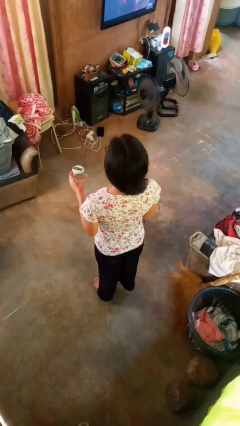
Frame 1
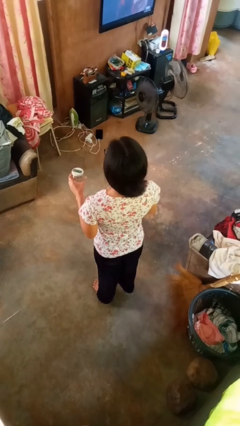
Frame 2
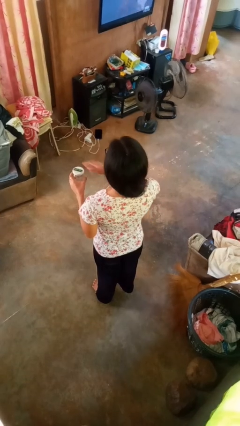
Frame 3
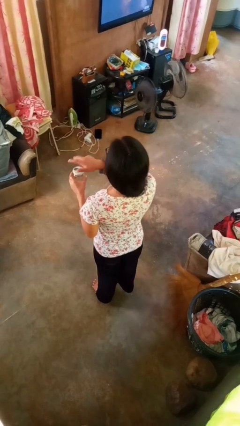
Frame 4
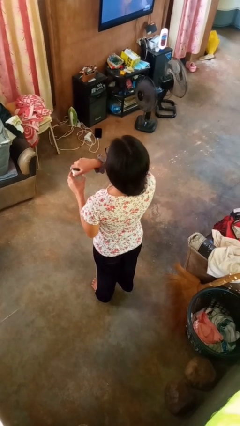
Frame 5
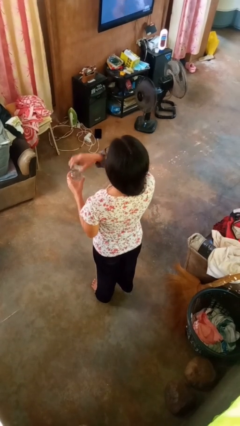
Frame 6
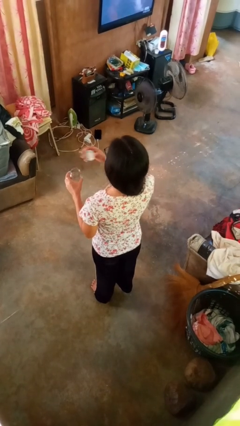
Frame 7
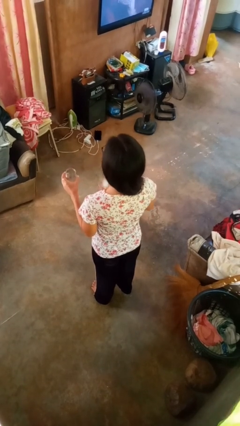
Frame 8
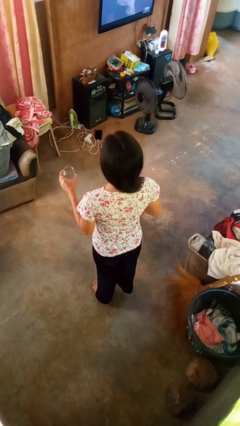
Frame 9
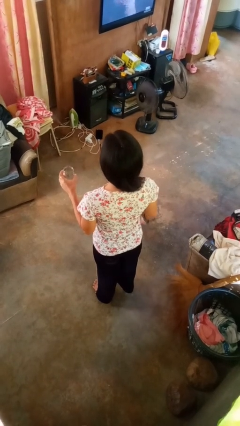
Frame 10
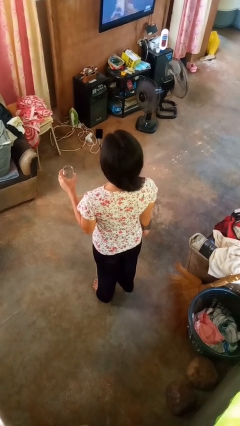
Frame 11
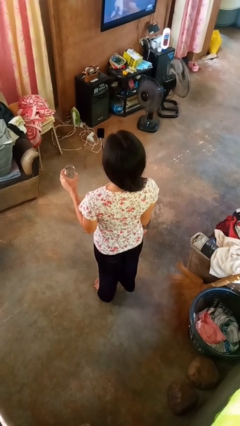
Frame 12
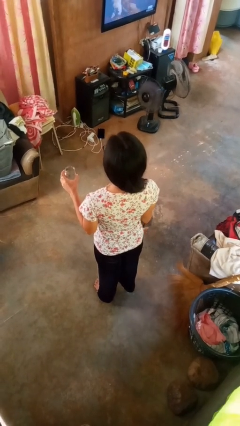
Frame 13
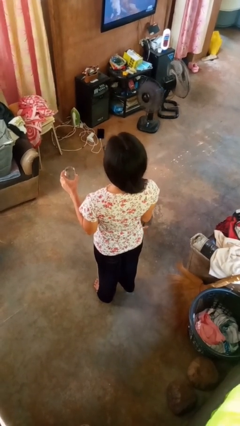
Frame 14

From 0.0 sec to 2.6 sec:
person opens jar

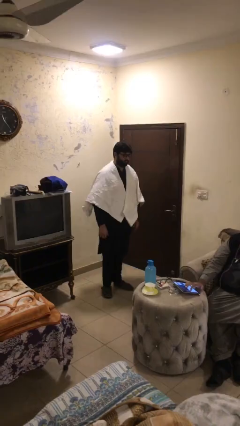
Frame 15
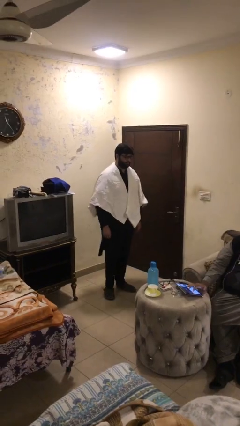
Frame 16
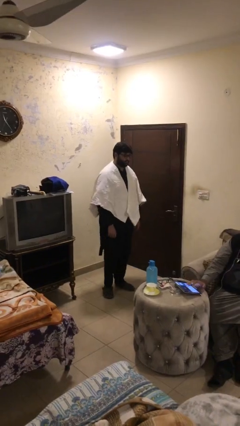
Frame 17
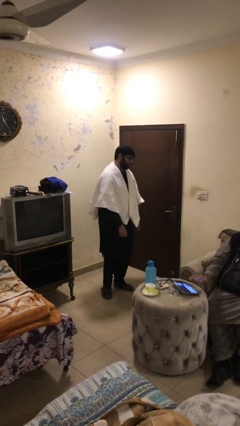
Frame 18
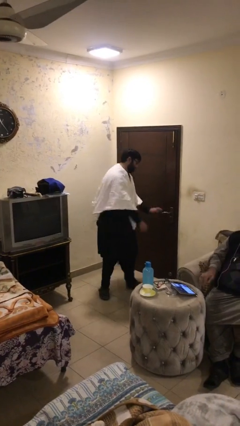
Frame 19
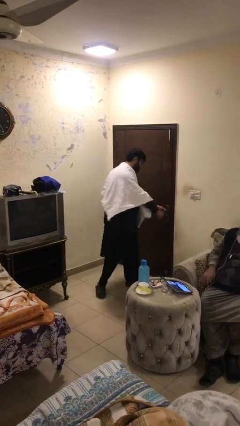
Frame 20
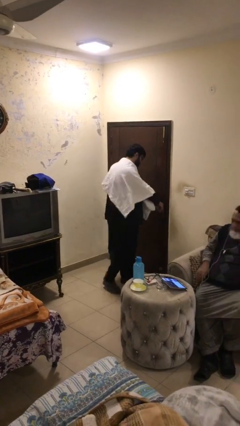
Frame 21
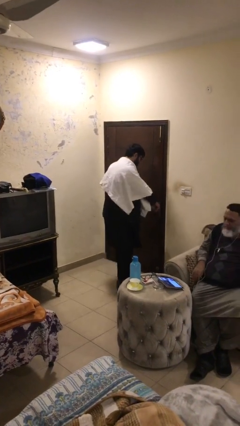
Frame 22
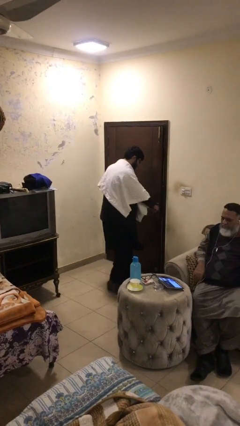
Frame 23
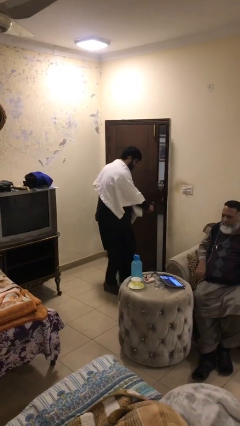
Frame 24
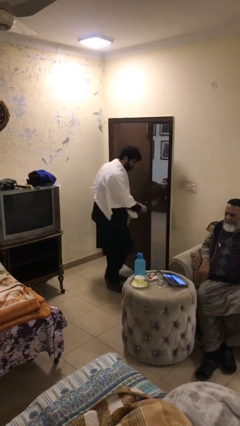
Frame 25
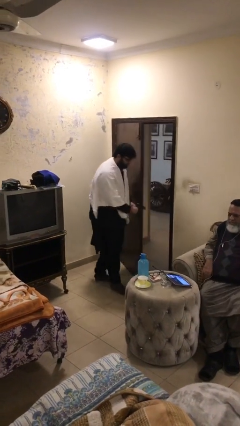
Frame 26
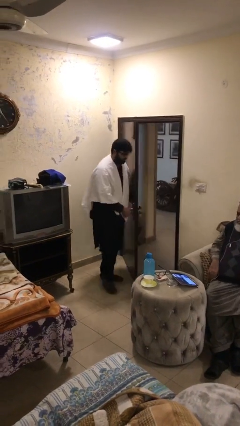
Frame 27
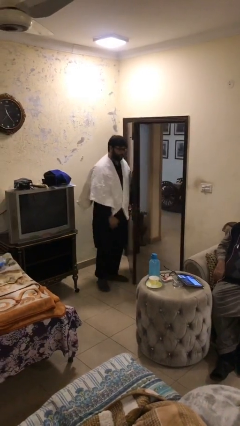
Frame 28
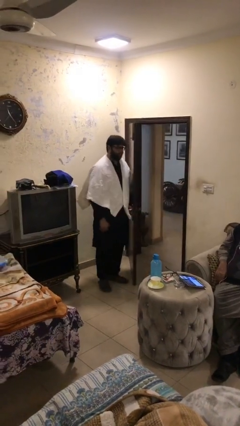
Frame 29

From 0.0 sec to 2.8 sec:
person opens facility door

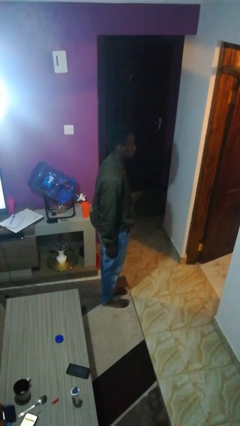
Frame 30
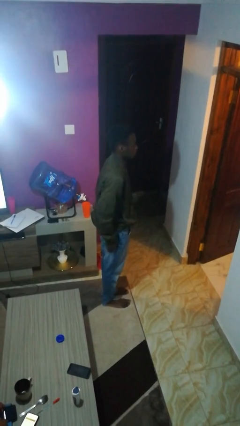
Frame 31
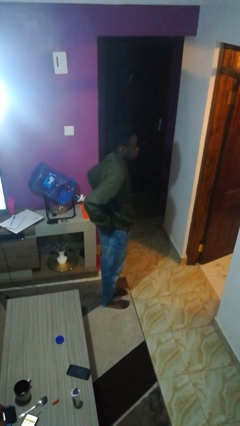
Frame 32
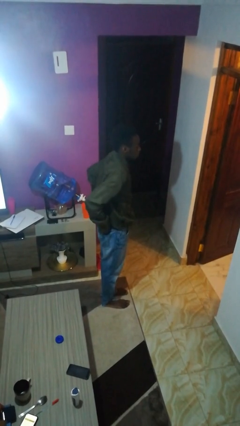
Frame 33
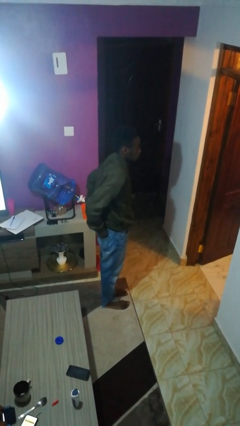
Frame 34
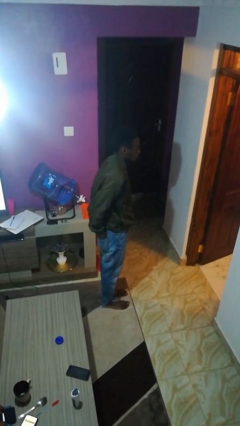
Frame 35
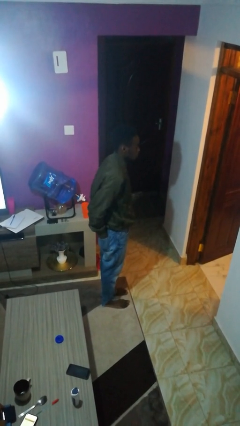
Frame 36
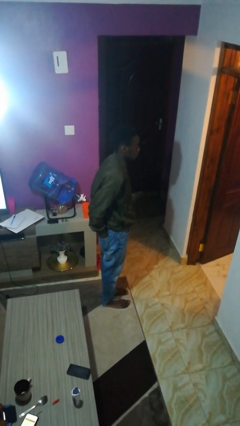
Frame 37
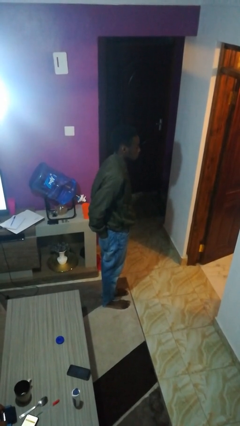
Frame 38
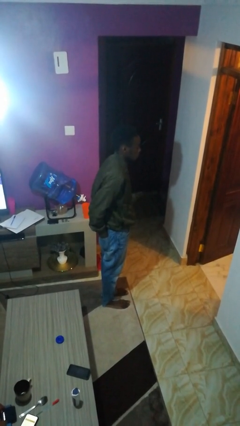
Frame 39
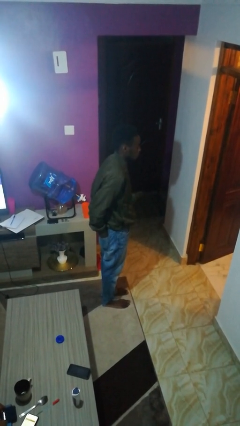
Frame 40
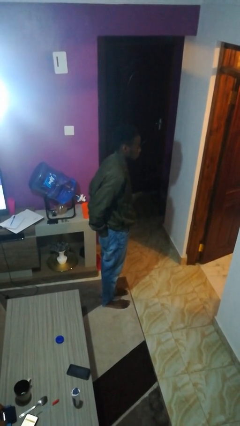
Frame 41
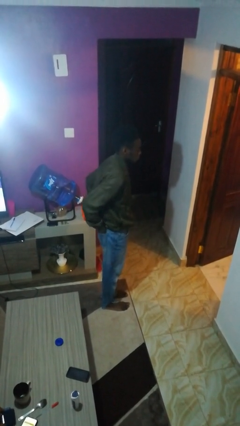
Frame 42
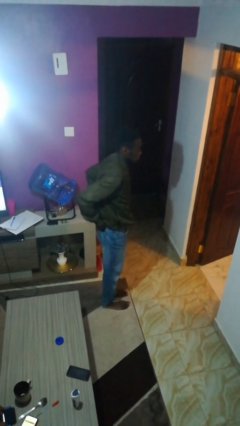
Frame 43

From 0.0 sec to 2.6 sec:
person puts hands in back pockets

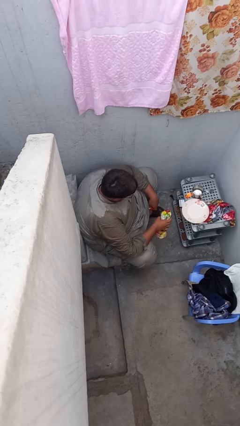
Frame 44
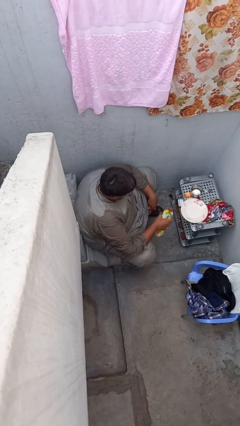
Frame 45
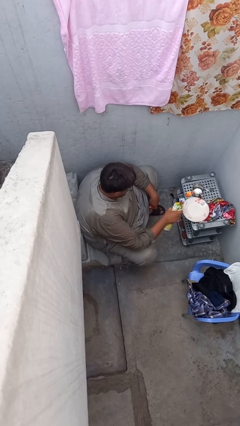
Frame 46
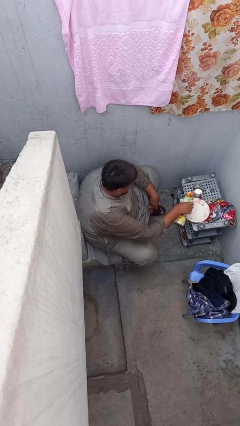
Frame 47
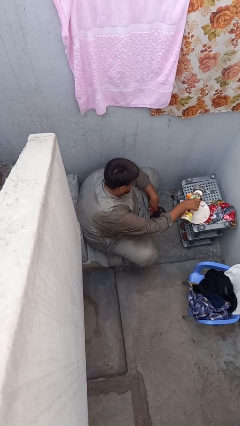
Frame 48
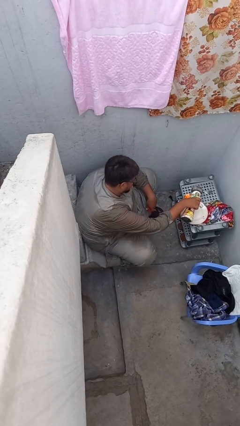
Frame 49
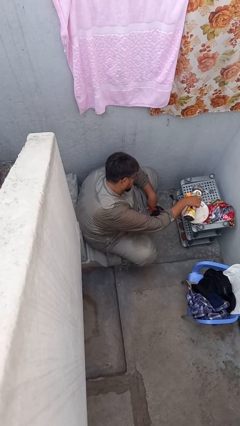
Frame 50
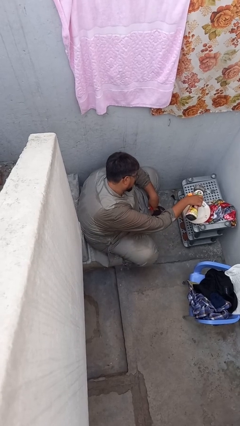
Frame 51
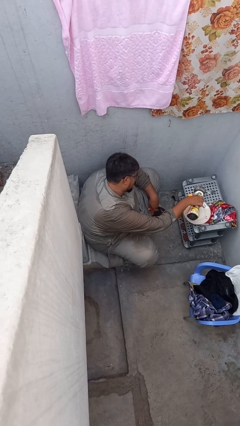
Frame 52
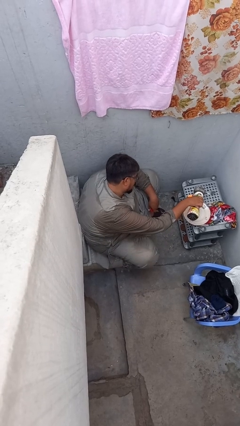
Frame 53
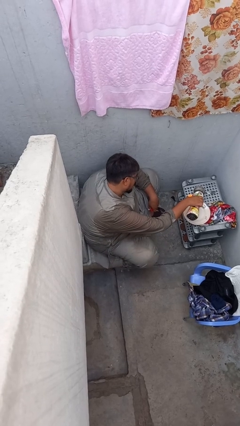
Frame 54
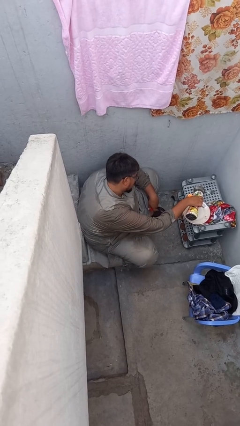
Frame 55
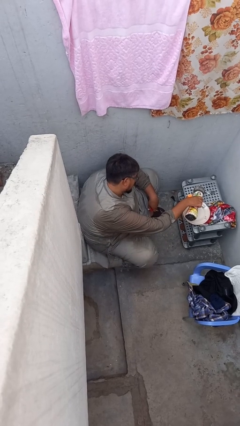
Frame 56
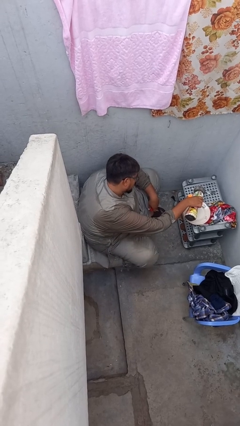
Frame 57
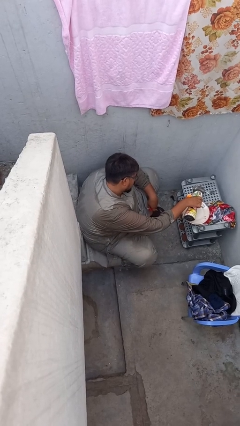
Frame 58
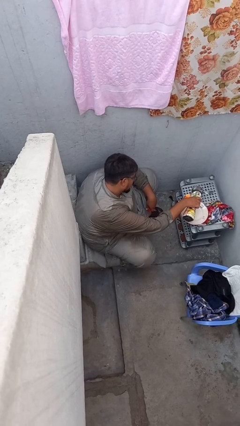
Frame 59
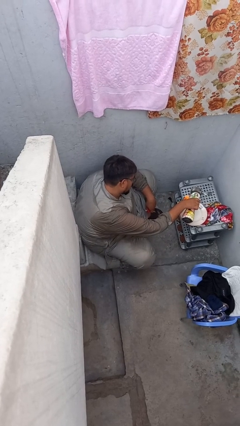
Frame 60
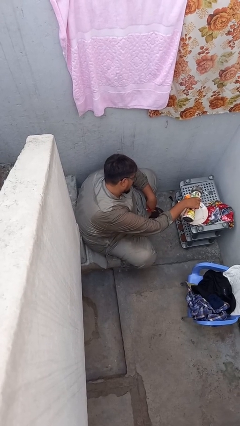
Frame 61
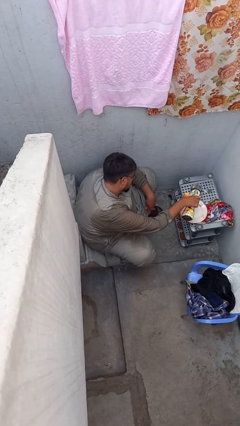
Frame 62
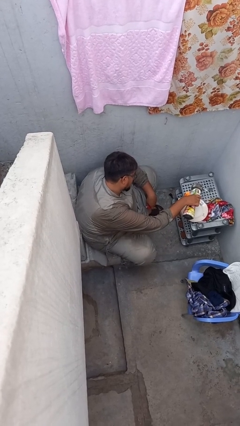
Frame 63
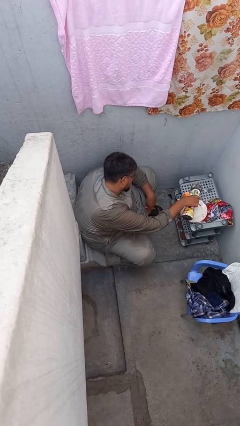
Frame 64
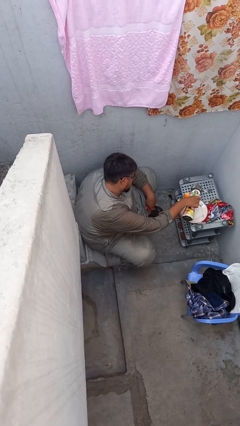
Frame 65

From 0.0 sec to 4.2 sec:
person pours liquid into cup

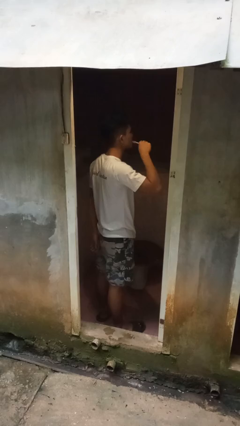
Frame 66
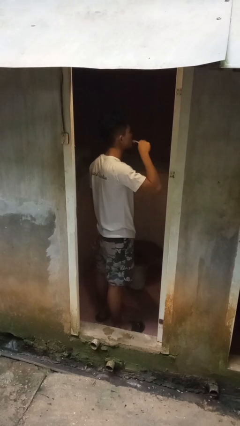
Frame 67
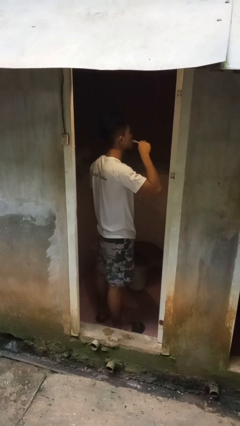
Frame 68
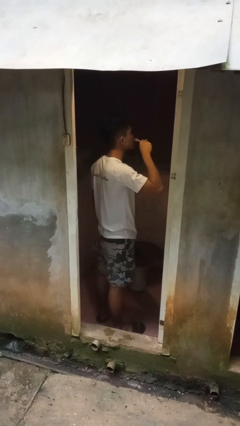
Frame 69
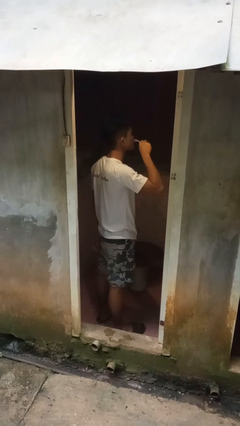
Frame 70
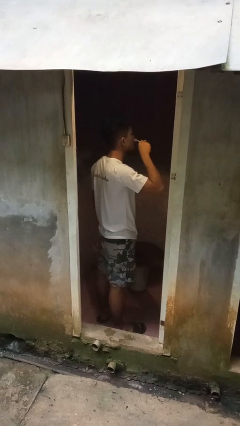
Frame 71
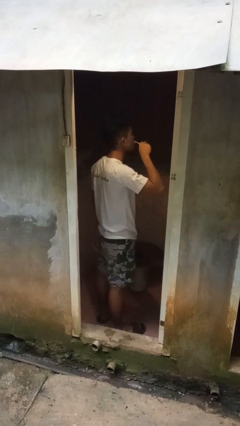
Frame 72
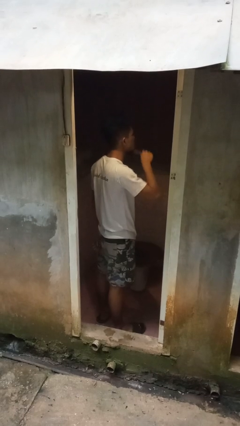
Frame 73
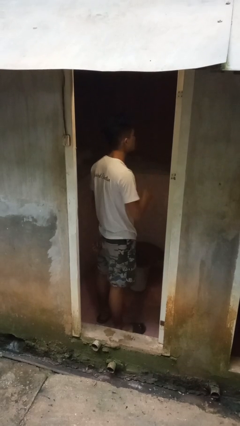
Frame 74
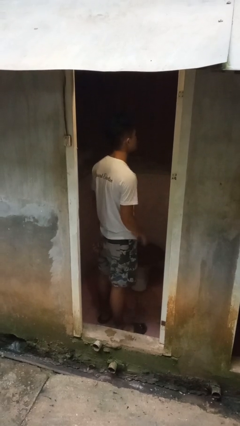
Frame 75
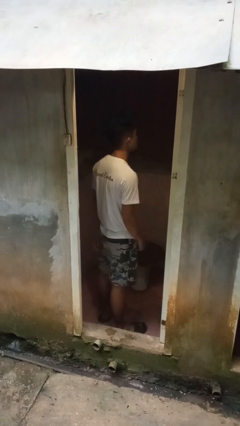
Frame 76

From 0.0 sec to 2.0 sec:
person brushes teeth

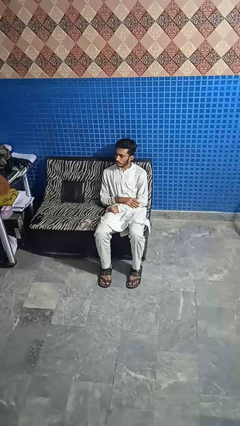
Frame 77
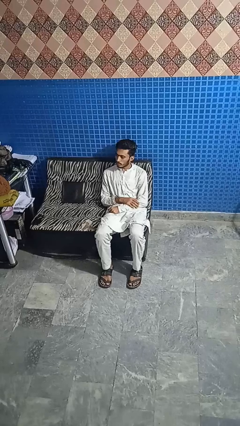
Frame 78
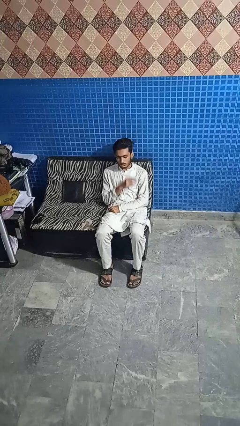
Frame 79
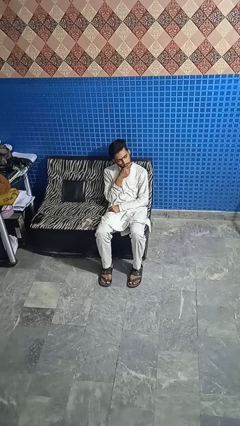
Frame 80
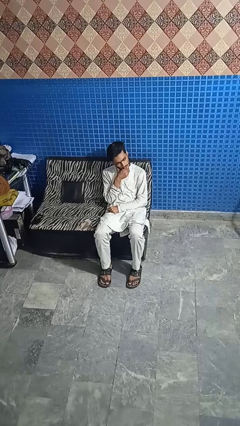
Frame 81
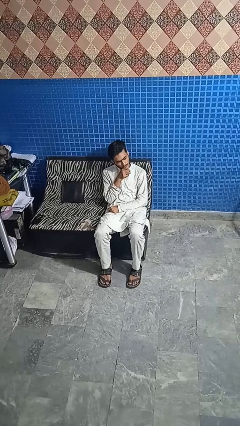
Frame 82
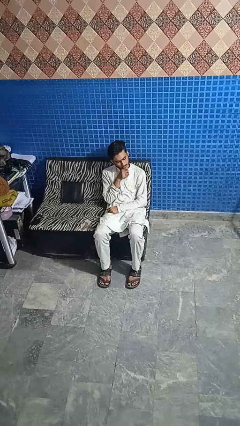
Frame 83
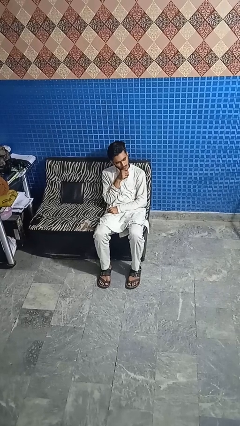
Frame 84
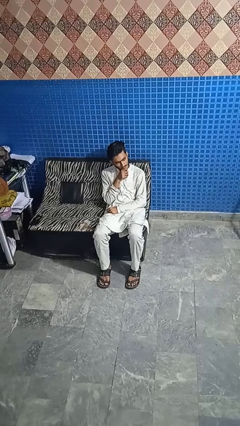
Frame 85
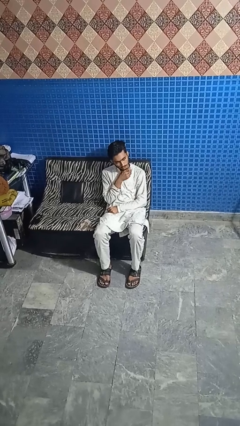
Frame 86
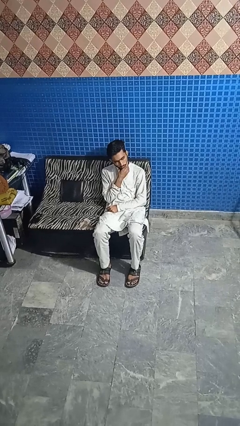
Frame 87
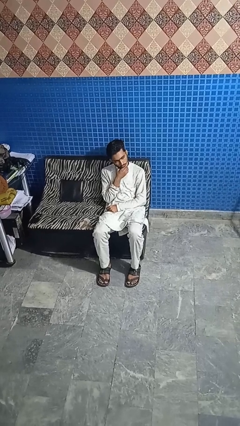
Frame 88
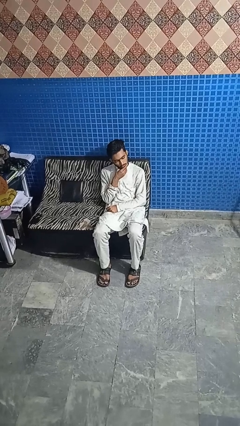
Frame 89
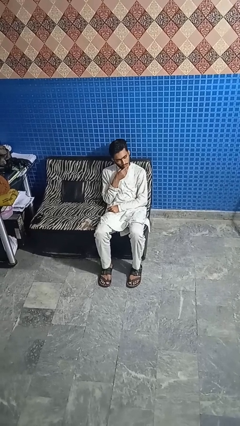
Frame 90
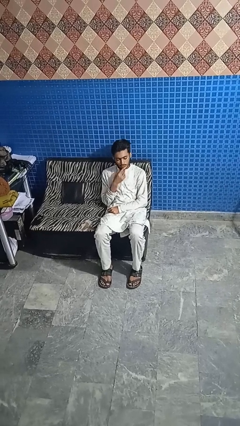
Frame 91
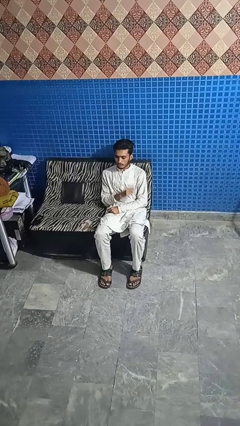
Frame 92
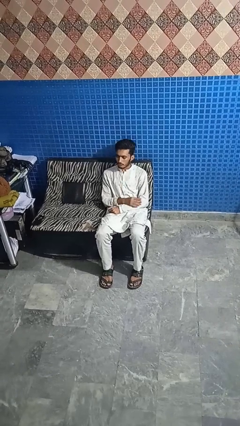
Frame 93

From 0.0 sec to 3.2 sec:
person strokes chin

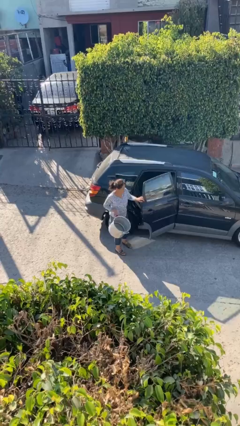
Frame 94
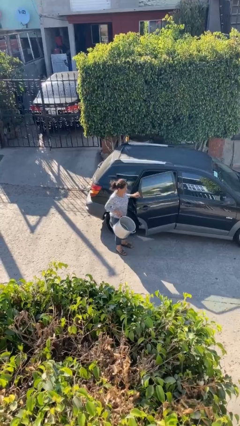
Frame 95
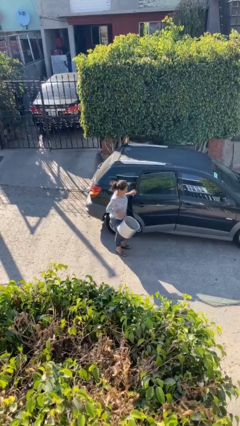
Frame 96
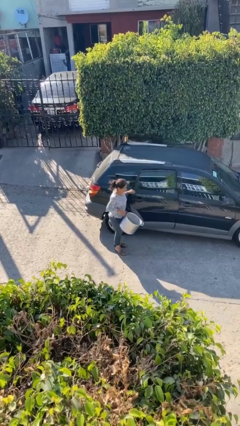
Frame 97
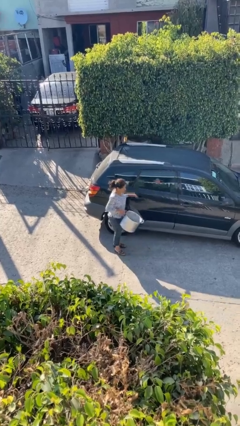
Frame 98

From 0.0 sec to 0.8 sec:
person closes car door
